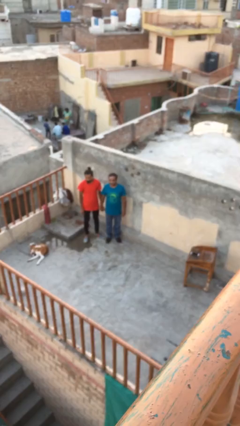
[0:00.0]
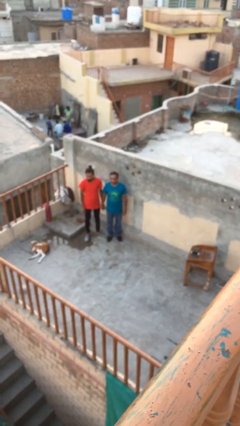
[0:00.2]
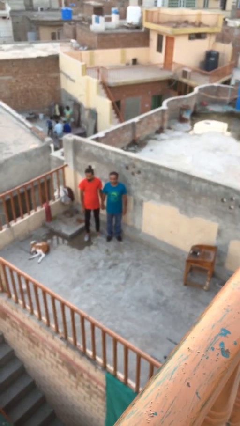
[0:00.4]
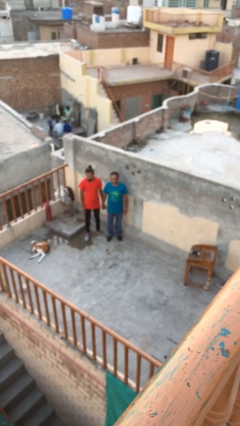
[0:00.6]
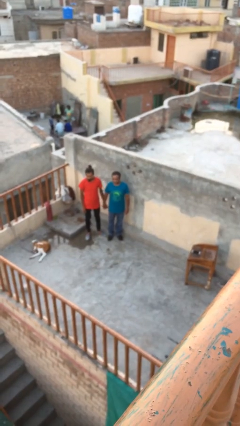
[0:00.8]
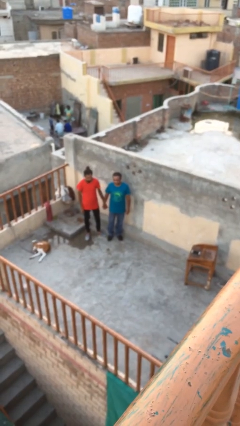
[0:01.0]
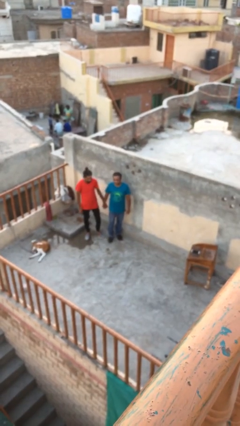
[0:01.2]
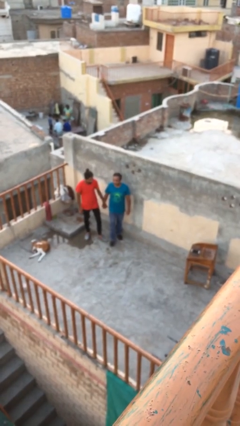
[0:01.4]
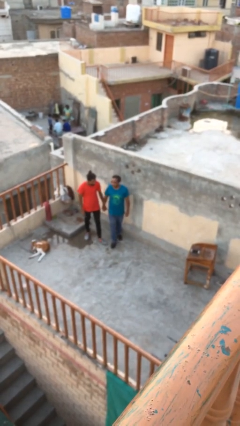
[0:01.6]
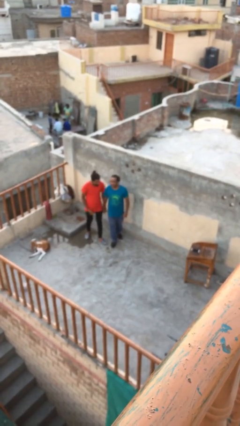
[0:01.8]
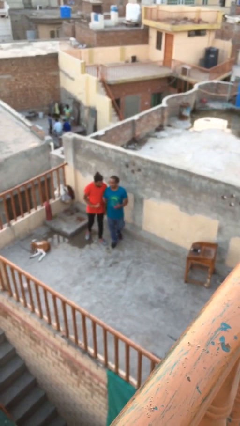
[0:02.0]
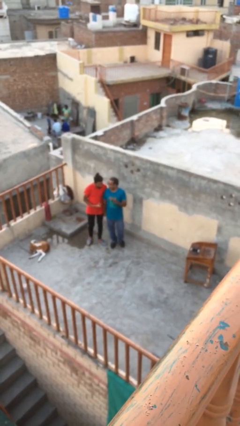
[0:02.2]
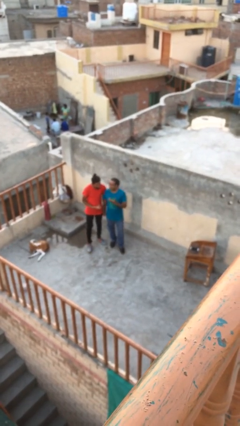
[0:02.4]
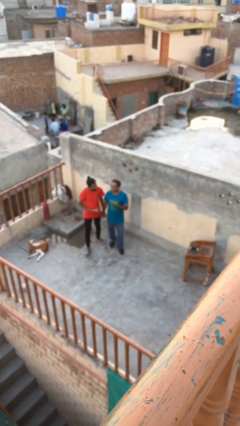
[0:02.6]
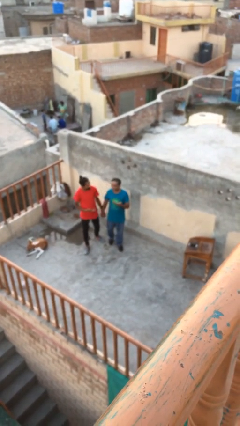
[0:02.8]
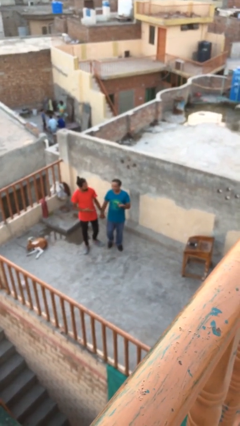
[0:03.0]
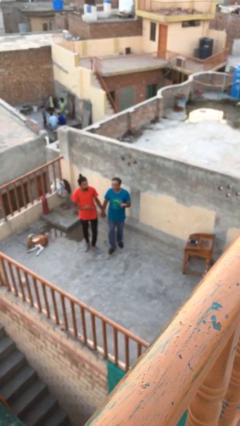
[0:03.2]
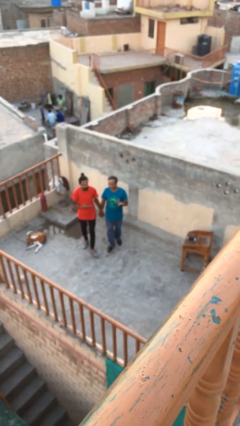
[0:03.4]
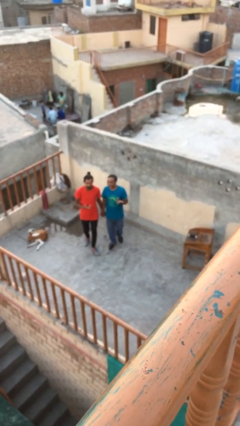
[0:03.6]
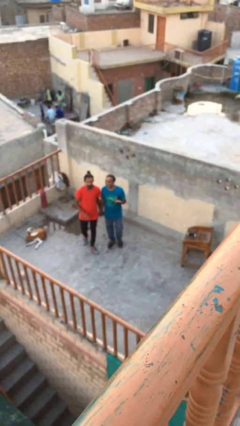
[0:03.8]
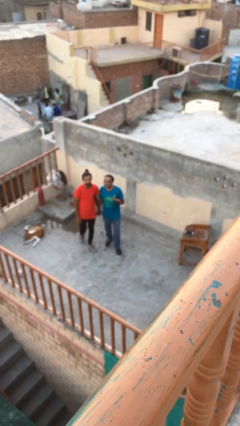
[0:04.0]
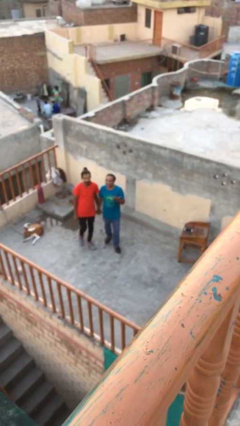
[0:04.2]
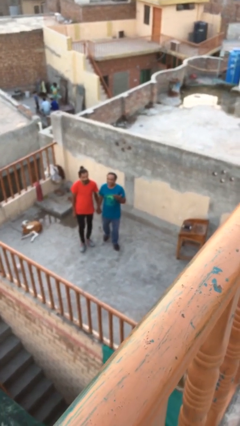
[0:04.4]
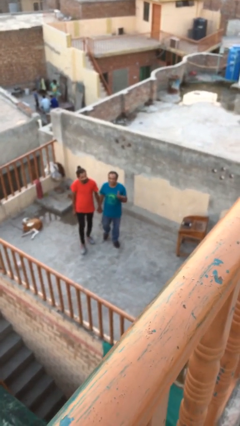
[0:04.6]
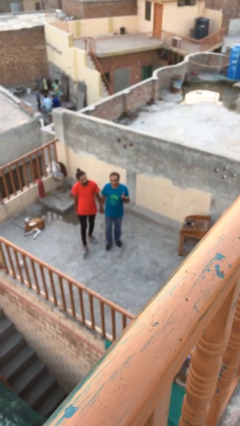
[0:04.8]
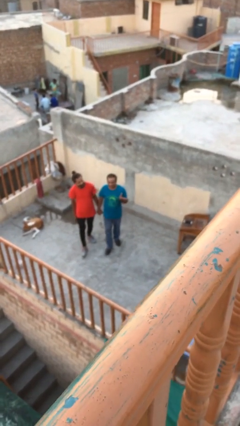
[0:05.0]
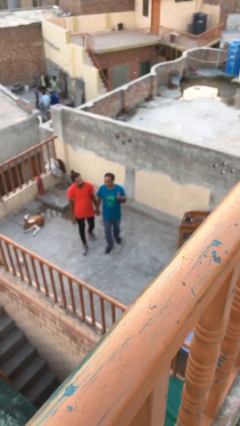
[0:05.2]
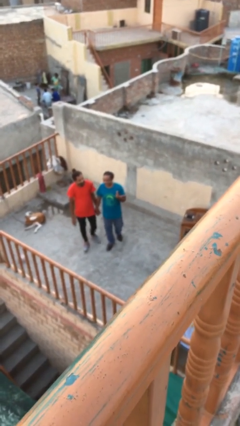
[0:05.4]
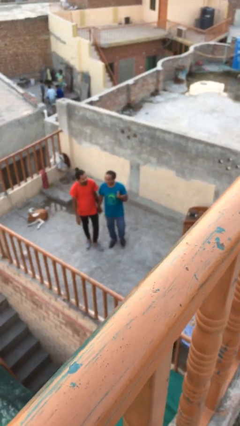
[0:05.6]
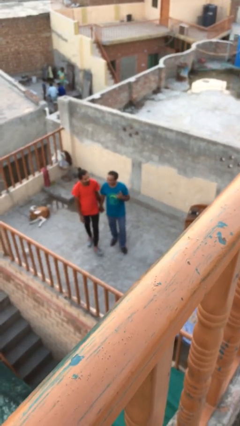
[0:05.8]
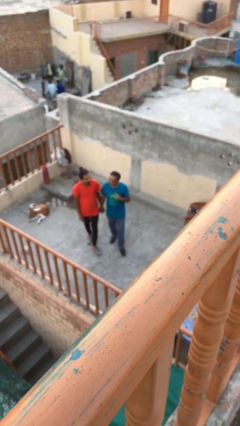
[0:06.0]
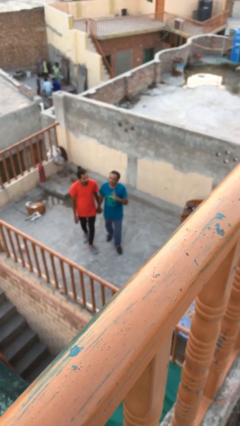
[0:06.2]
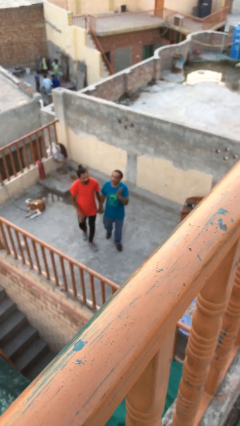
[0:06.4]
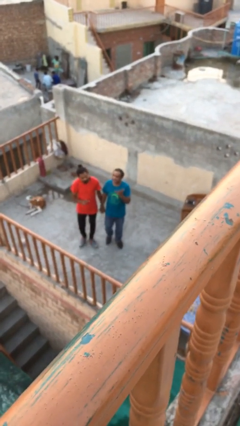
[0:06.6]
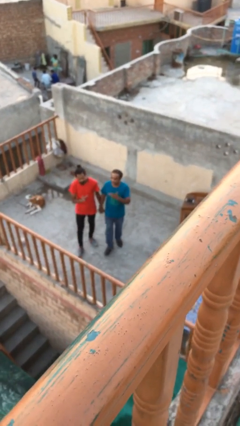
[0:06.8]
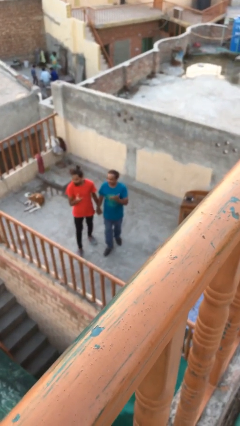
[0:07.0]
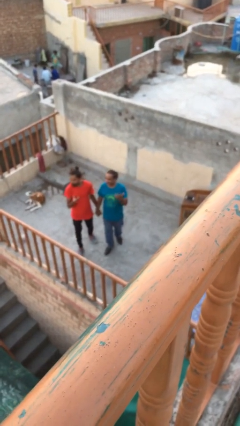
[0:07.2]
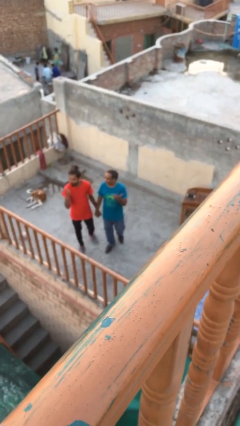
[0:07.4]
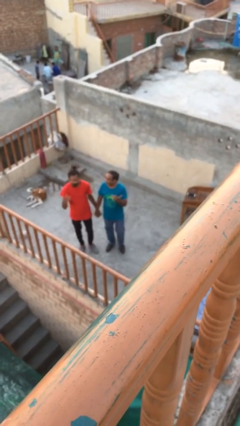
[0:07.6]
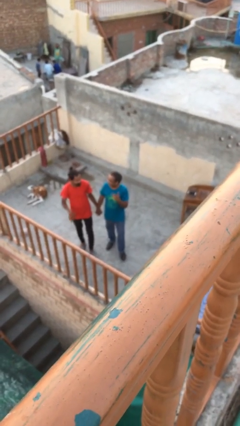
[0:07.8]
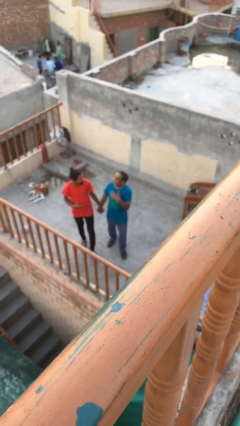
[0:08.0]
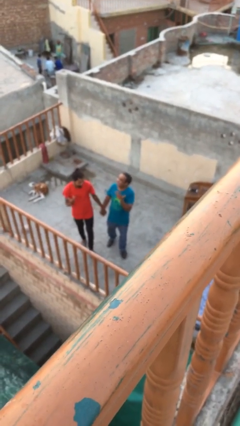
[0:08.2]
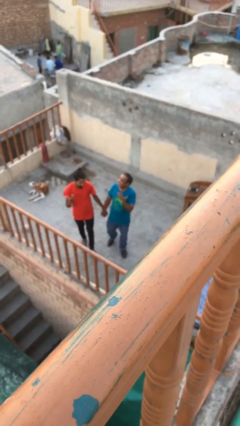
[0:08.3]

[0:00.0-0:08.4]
person holds hand

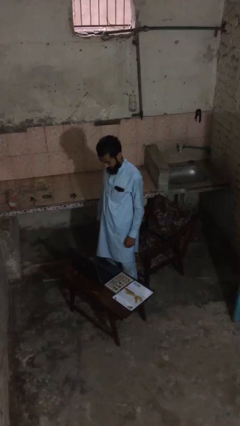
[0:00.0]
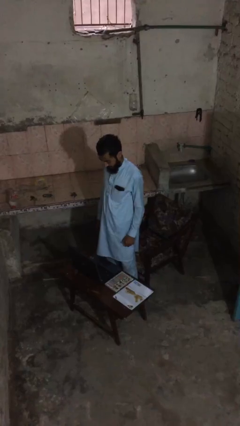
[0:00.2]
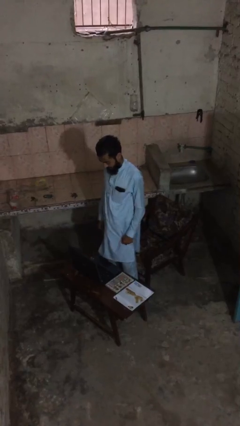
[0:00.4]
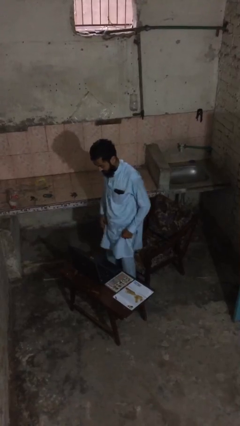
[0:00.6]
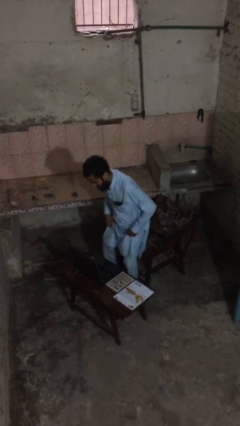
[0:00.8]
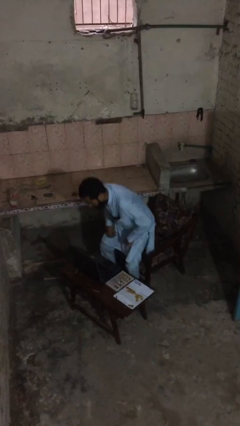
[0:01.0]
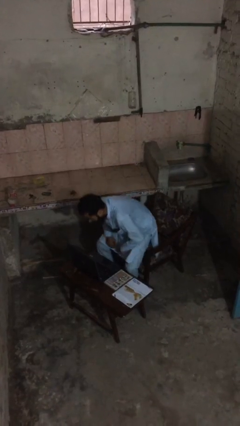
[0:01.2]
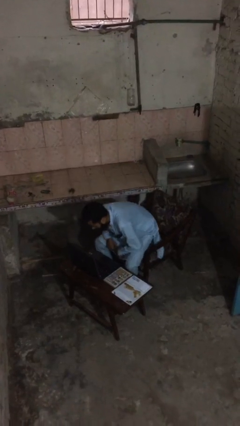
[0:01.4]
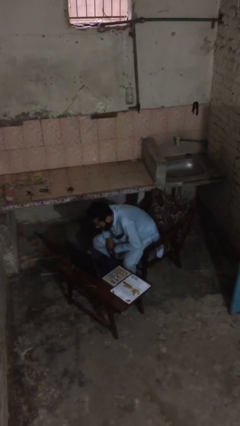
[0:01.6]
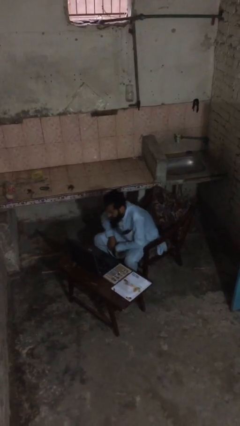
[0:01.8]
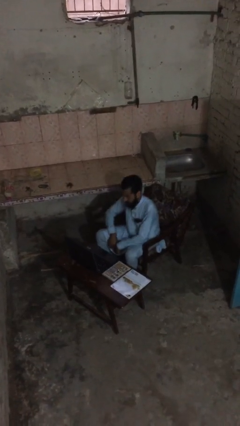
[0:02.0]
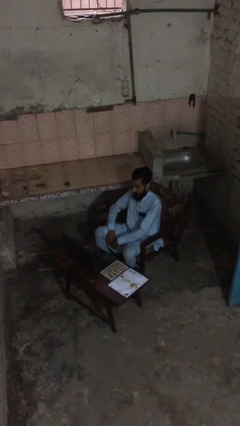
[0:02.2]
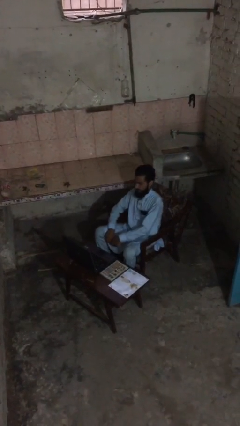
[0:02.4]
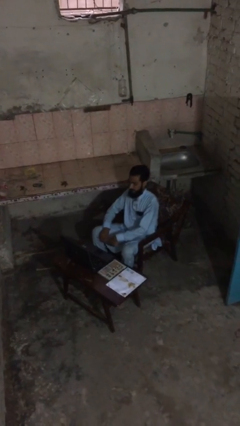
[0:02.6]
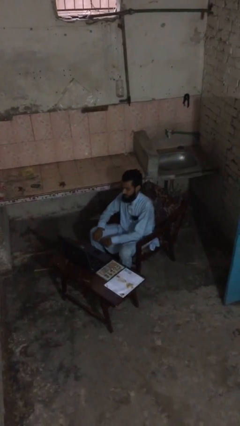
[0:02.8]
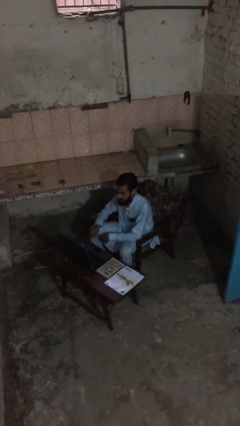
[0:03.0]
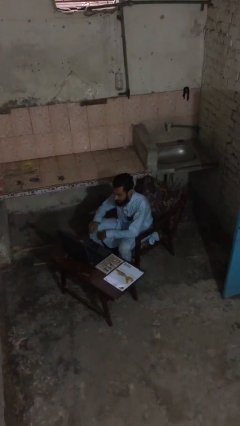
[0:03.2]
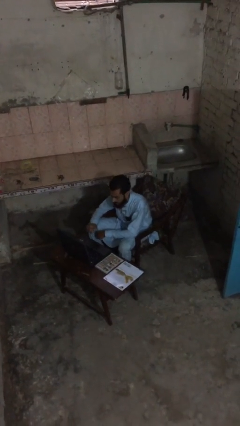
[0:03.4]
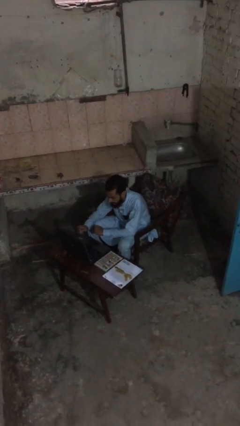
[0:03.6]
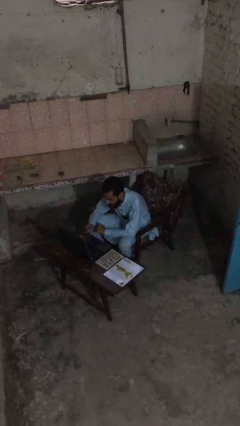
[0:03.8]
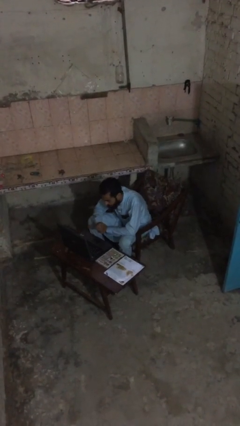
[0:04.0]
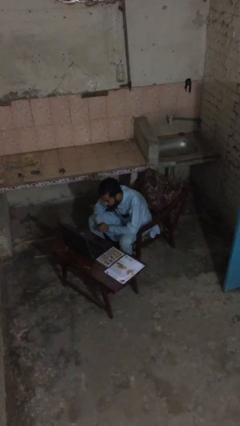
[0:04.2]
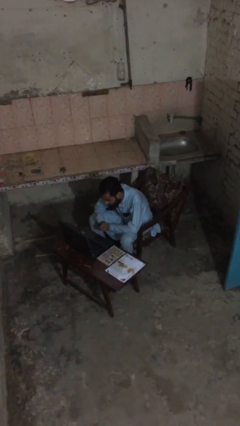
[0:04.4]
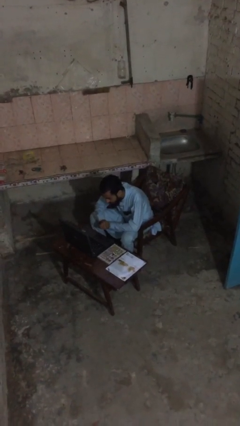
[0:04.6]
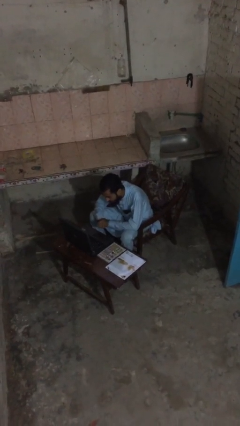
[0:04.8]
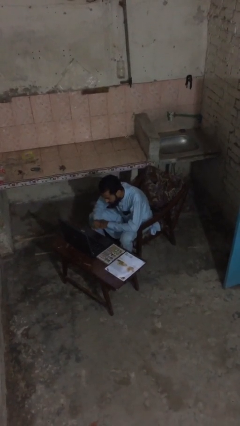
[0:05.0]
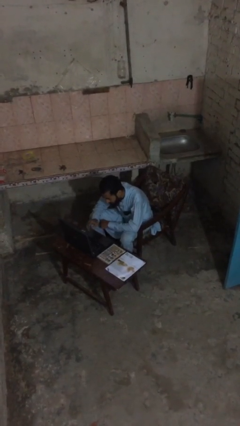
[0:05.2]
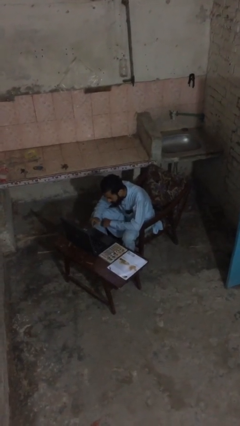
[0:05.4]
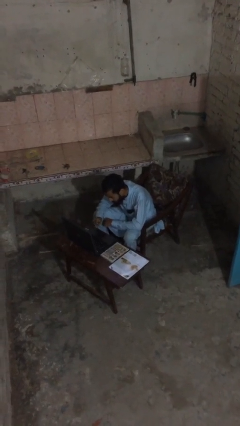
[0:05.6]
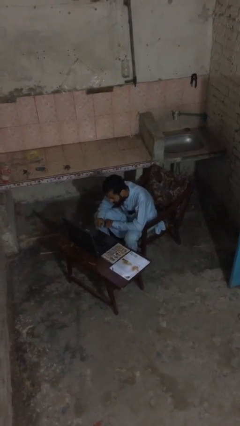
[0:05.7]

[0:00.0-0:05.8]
person sits down

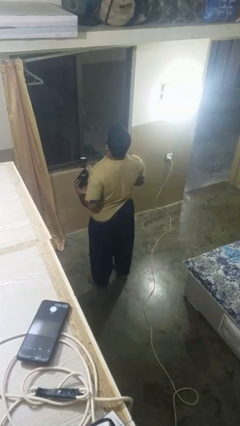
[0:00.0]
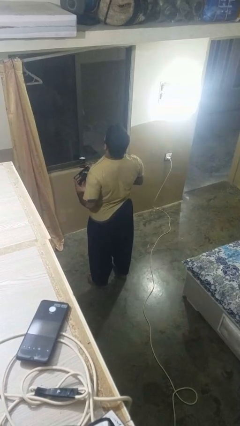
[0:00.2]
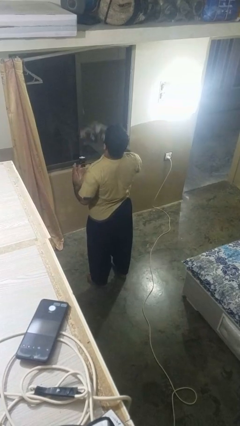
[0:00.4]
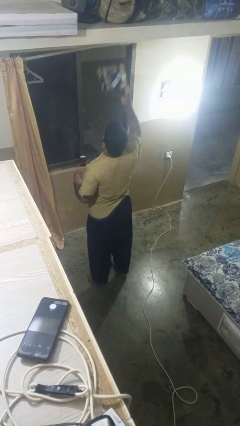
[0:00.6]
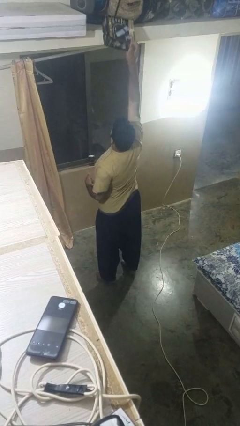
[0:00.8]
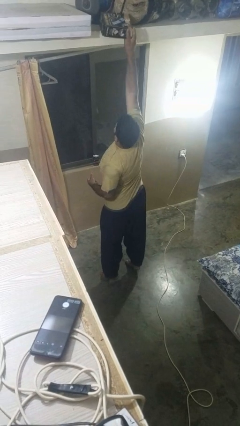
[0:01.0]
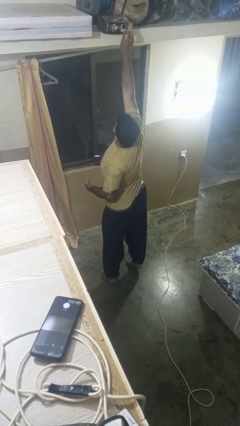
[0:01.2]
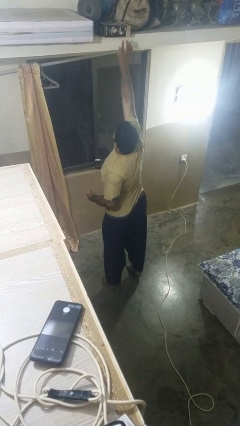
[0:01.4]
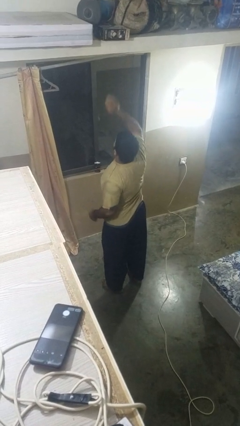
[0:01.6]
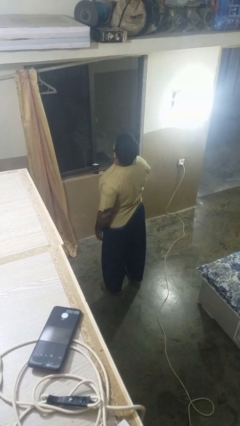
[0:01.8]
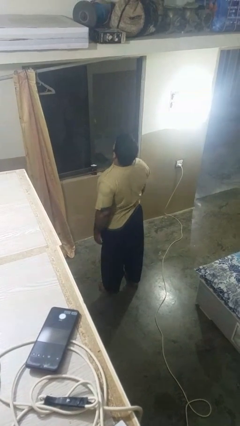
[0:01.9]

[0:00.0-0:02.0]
person puts down object on shelf

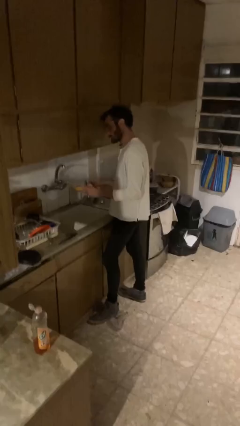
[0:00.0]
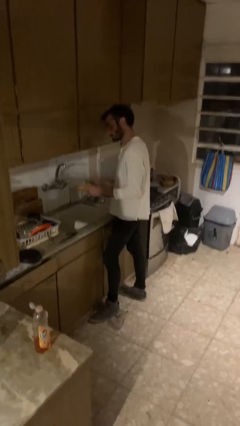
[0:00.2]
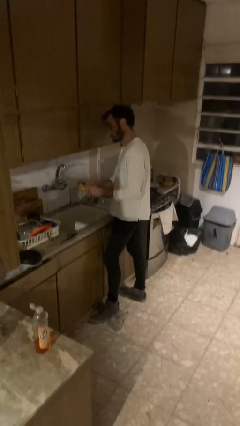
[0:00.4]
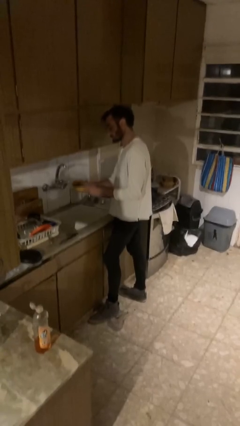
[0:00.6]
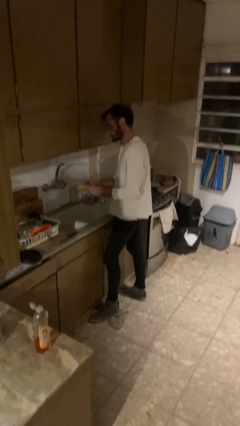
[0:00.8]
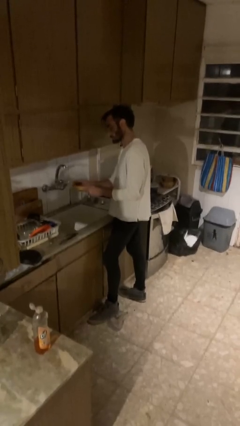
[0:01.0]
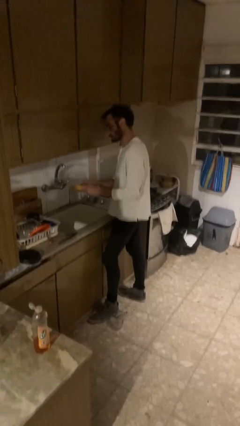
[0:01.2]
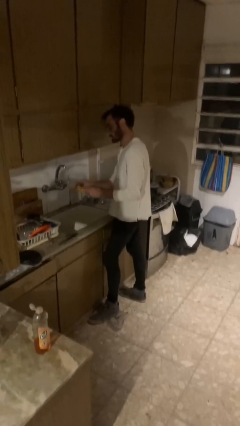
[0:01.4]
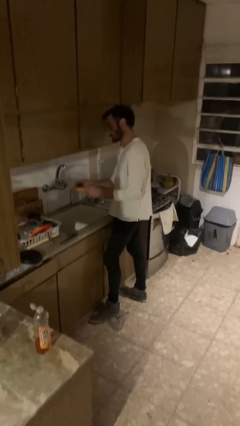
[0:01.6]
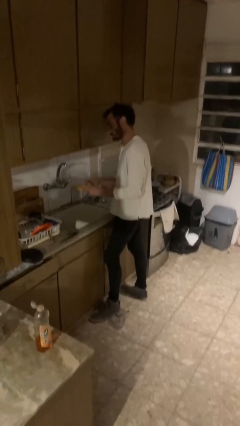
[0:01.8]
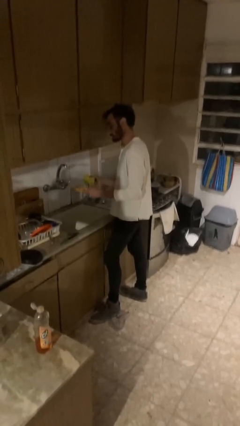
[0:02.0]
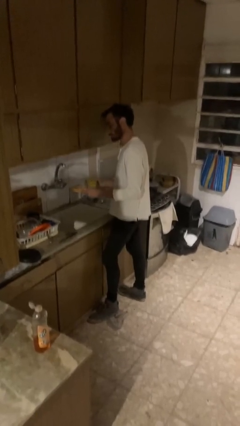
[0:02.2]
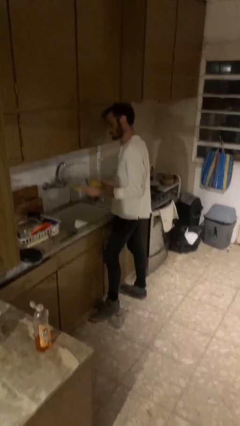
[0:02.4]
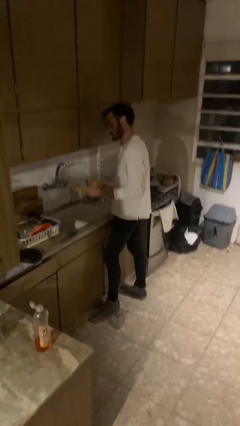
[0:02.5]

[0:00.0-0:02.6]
person washes dish
